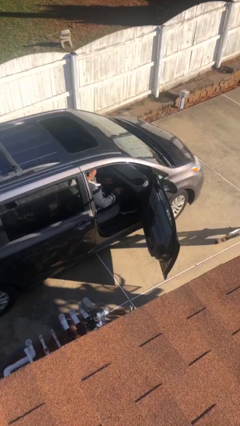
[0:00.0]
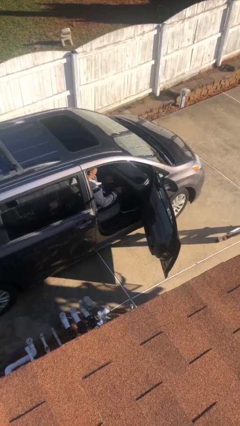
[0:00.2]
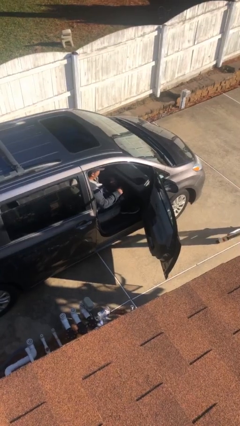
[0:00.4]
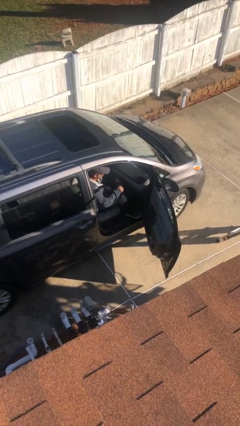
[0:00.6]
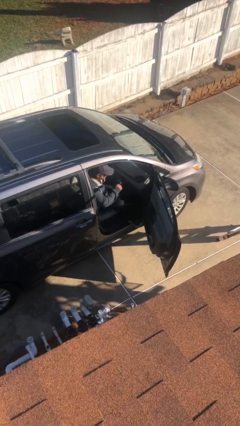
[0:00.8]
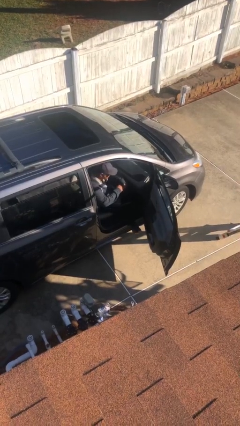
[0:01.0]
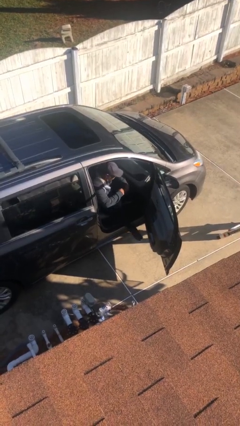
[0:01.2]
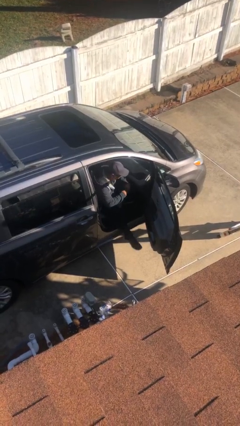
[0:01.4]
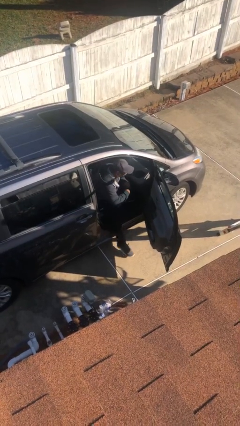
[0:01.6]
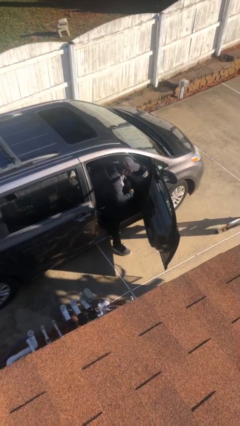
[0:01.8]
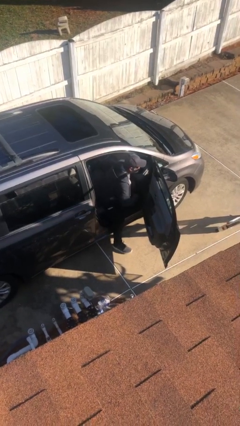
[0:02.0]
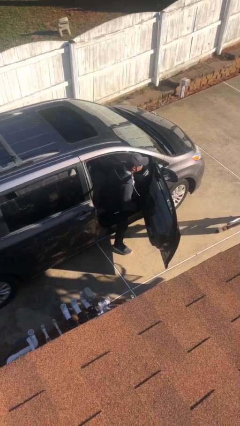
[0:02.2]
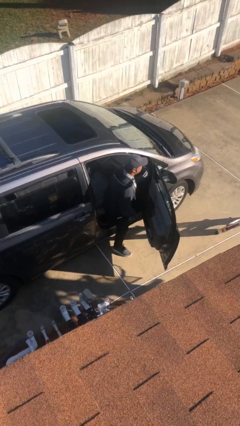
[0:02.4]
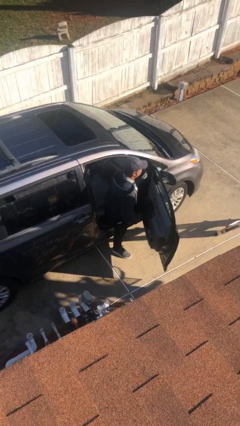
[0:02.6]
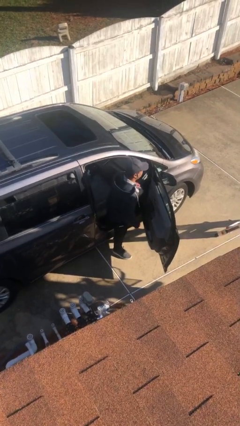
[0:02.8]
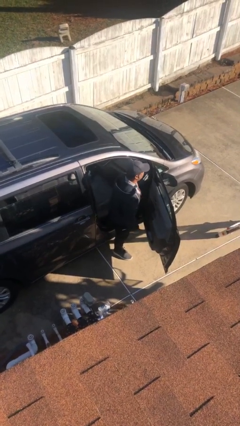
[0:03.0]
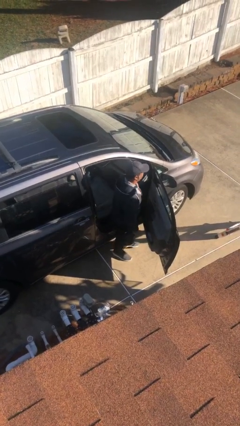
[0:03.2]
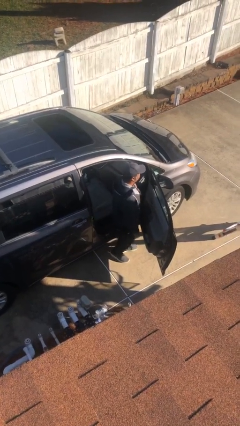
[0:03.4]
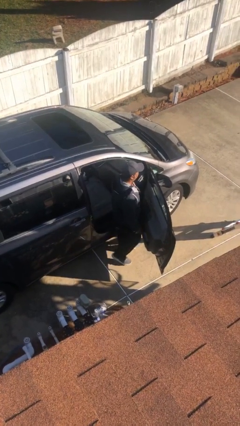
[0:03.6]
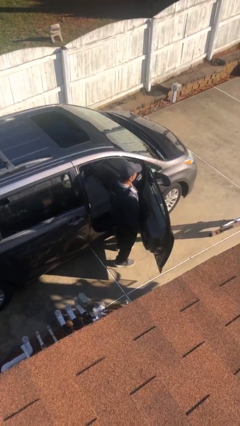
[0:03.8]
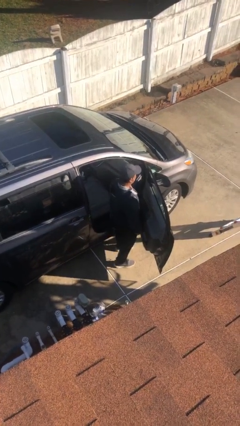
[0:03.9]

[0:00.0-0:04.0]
person exits car

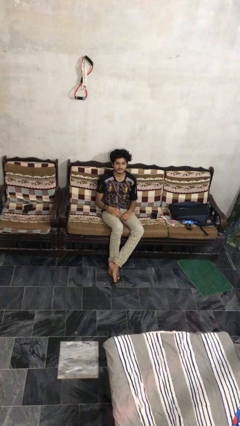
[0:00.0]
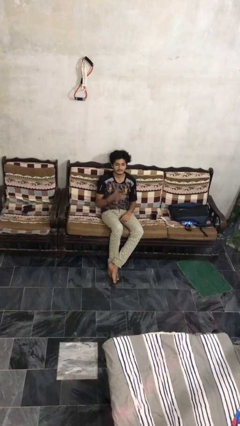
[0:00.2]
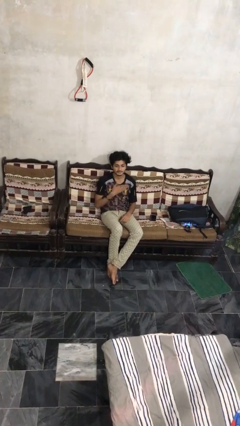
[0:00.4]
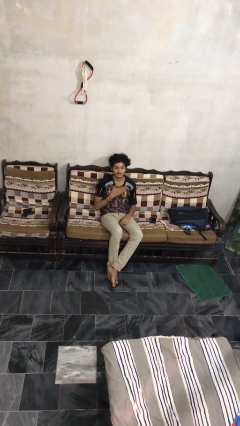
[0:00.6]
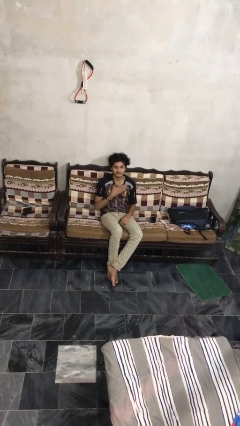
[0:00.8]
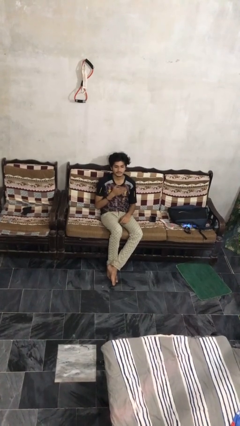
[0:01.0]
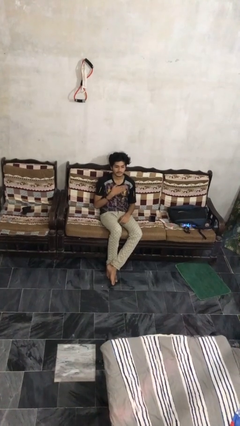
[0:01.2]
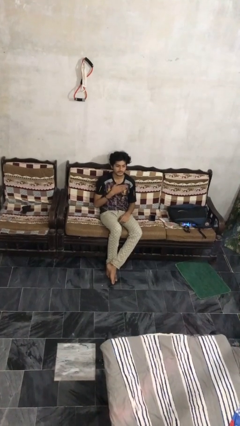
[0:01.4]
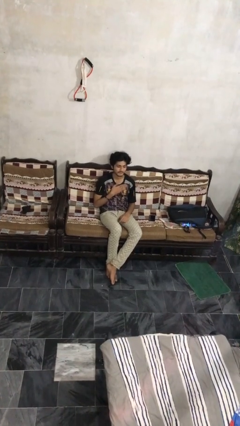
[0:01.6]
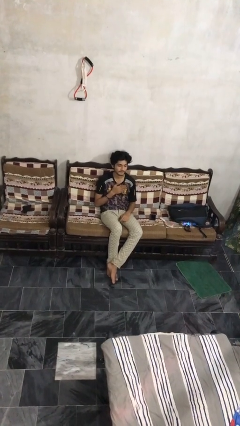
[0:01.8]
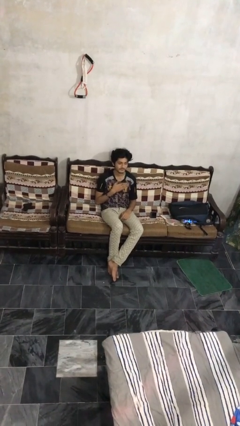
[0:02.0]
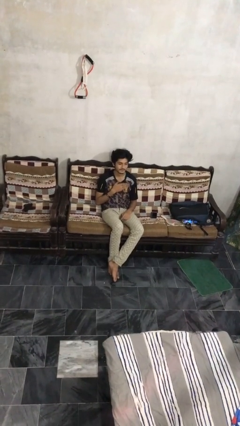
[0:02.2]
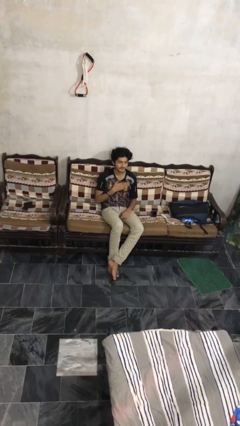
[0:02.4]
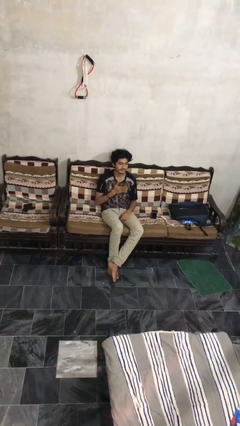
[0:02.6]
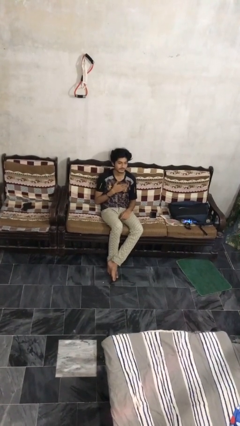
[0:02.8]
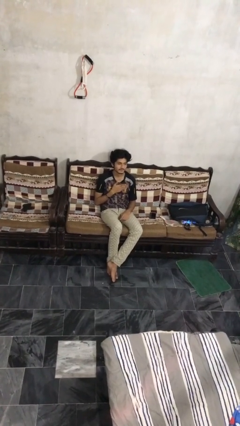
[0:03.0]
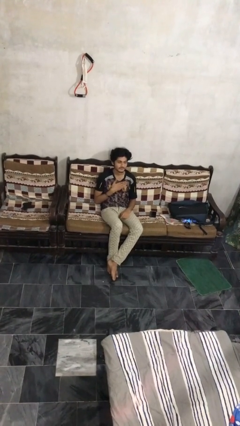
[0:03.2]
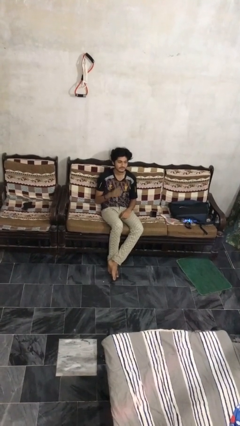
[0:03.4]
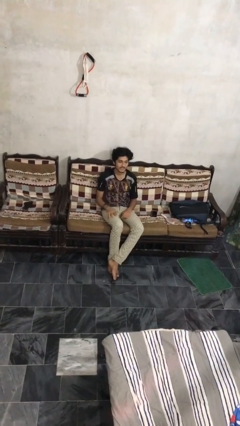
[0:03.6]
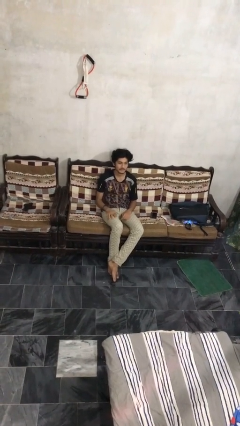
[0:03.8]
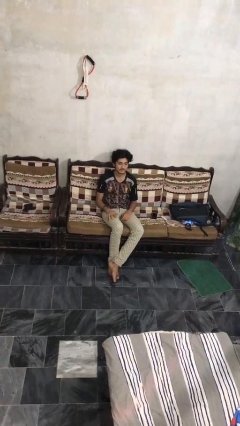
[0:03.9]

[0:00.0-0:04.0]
person drums on chest

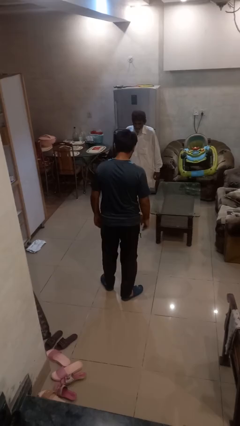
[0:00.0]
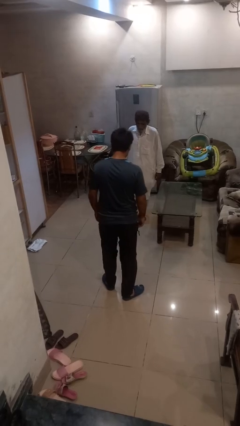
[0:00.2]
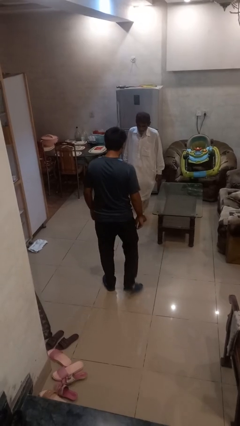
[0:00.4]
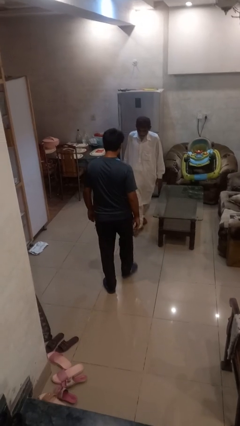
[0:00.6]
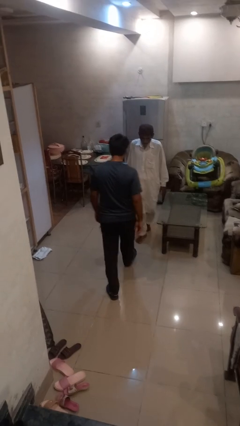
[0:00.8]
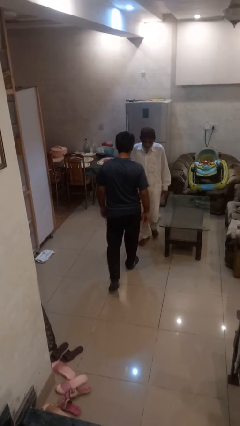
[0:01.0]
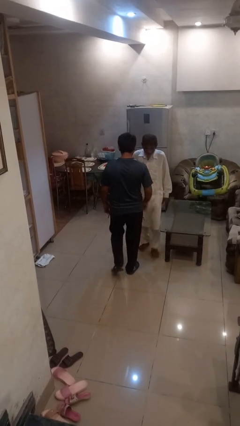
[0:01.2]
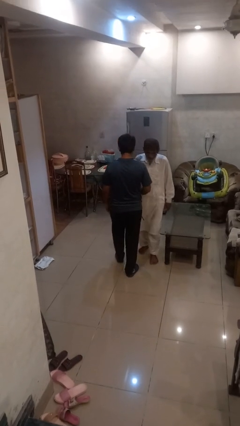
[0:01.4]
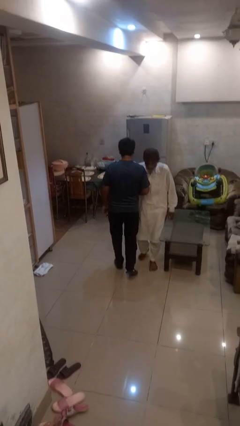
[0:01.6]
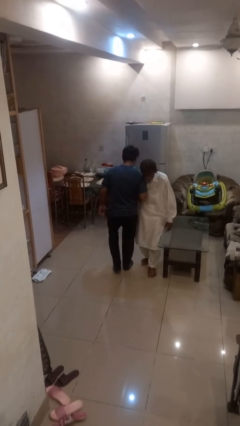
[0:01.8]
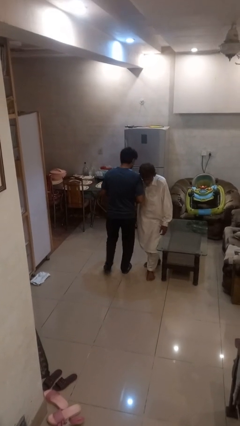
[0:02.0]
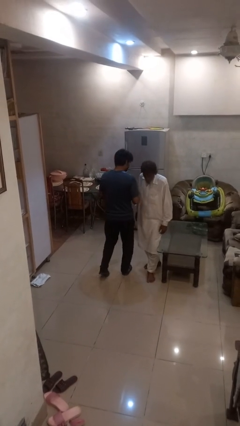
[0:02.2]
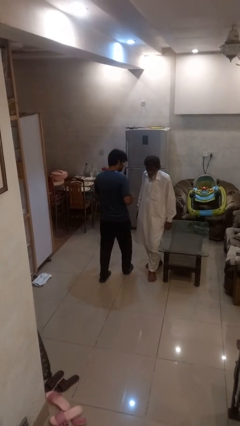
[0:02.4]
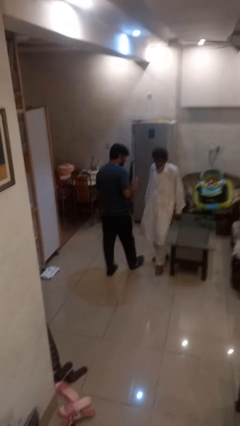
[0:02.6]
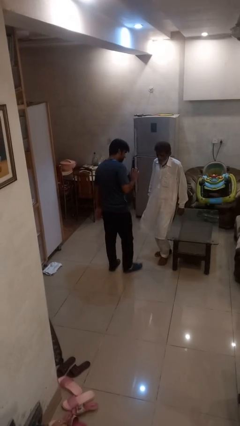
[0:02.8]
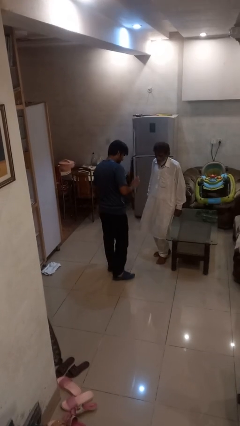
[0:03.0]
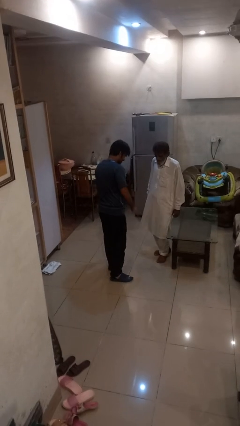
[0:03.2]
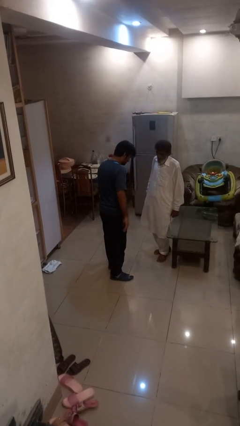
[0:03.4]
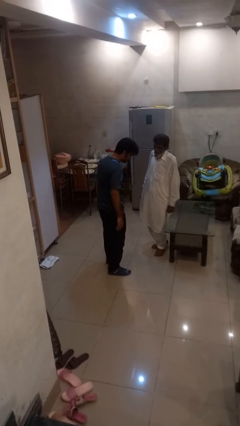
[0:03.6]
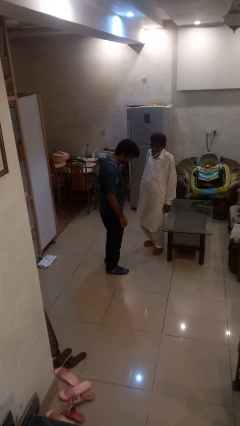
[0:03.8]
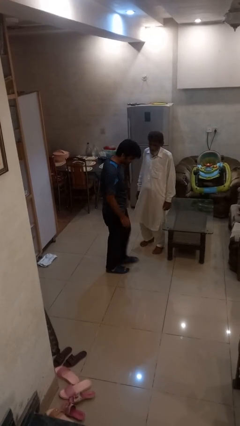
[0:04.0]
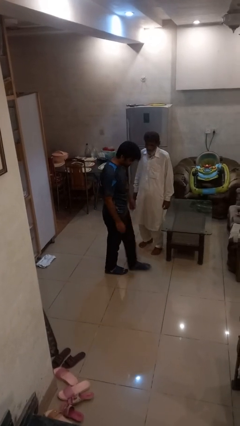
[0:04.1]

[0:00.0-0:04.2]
person bumps into person

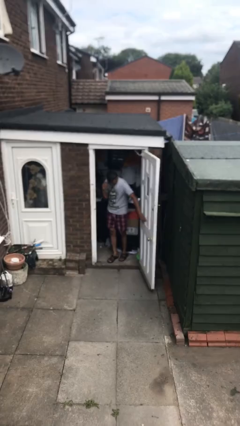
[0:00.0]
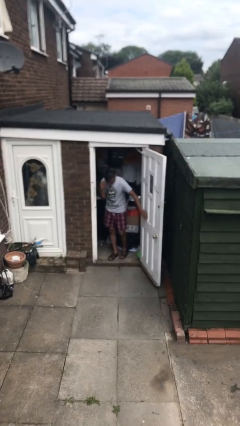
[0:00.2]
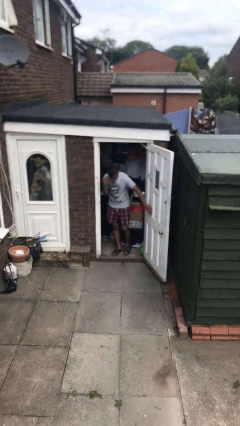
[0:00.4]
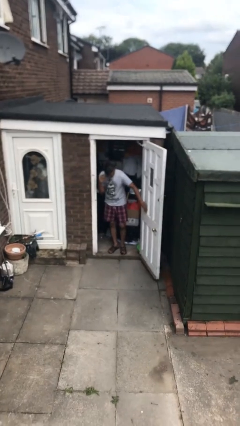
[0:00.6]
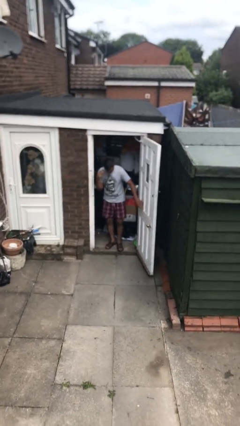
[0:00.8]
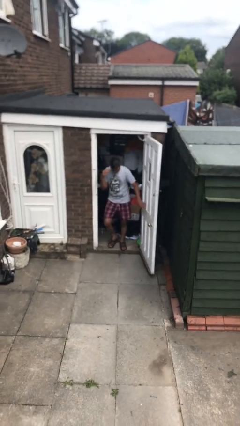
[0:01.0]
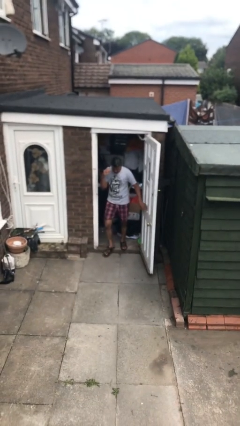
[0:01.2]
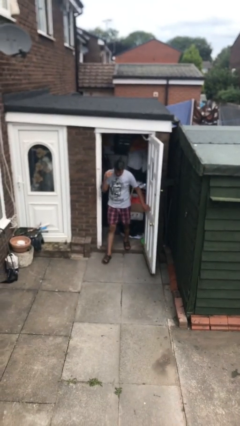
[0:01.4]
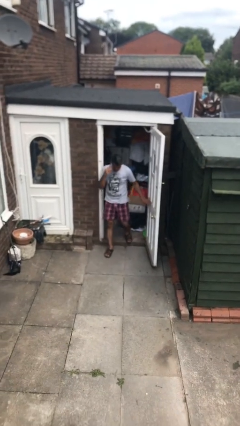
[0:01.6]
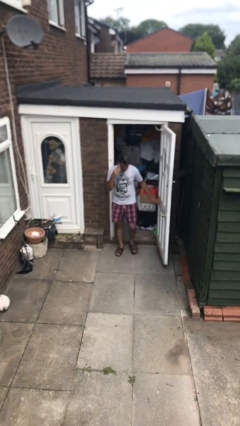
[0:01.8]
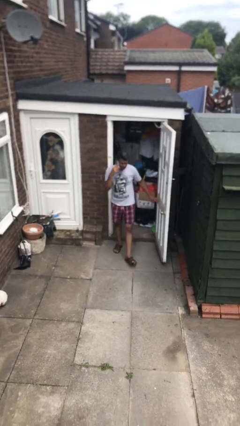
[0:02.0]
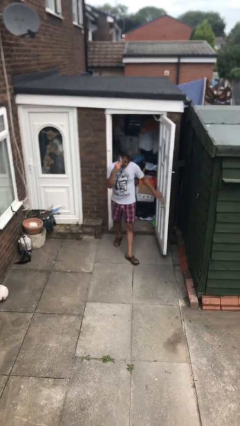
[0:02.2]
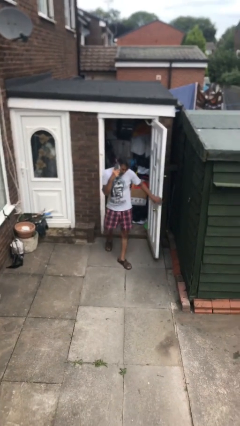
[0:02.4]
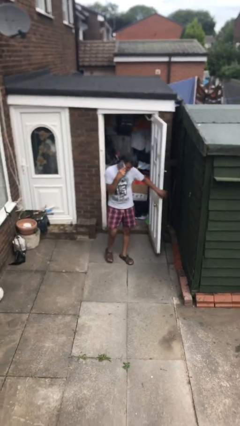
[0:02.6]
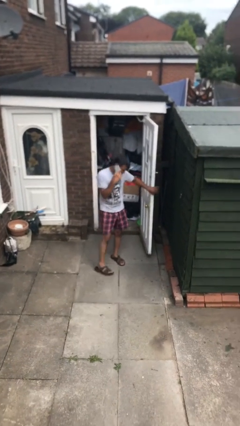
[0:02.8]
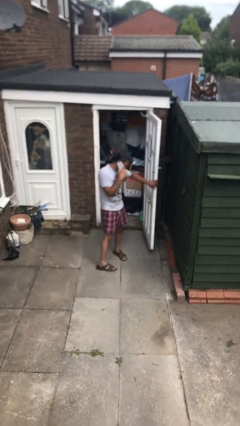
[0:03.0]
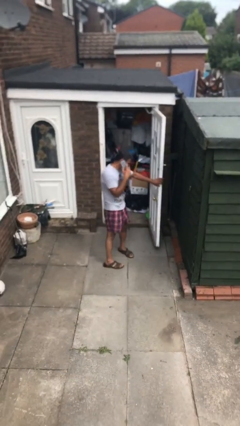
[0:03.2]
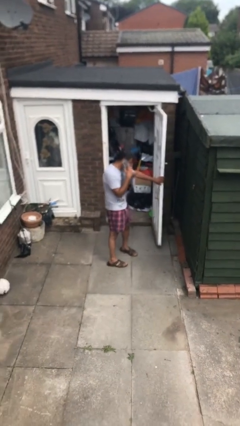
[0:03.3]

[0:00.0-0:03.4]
person enters scene through structure

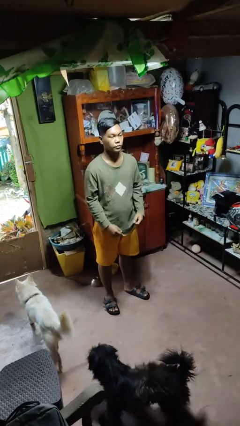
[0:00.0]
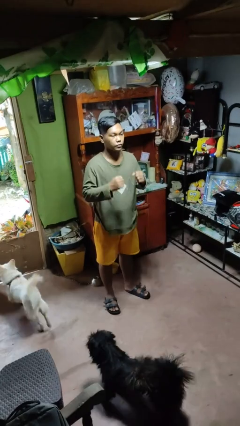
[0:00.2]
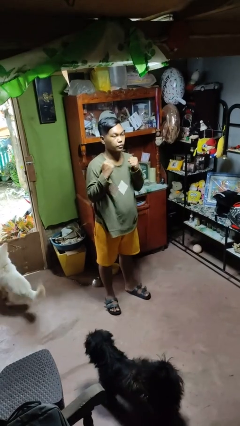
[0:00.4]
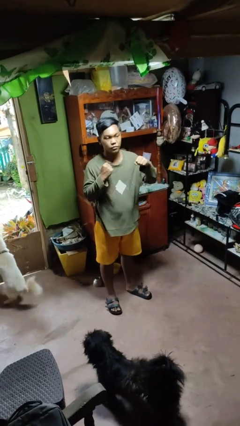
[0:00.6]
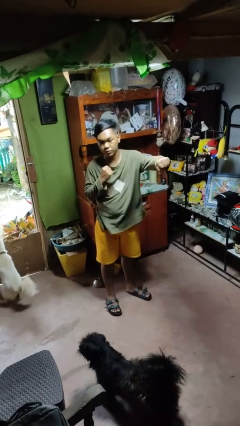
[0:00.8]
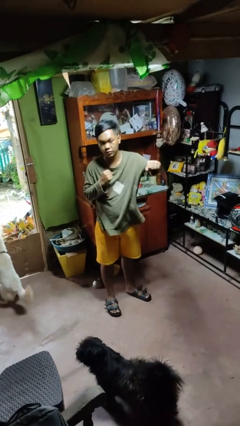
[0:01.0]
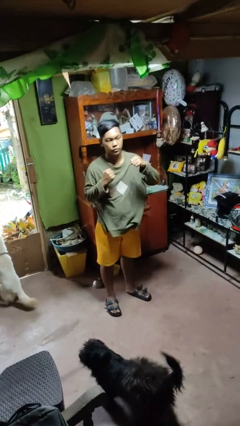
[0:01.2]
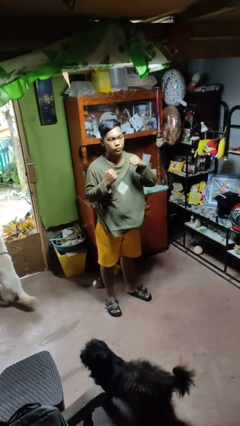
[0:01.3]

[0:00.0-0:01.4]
person punches

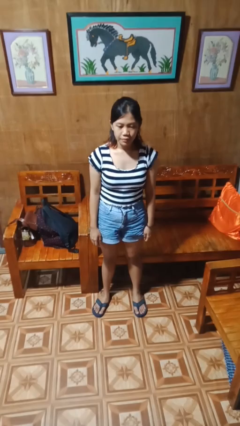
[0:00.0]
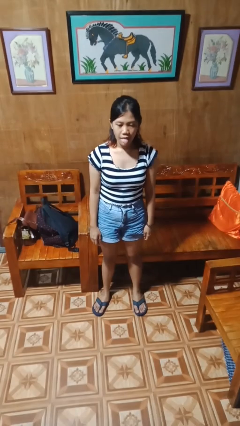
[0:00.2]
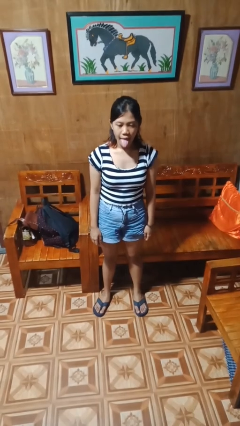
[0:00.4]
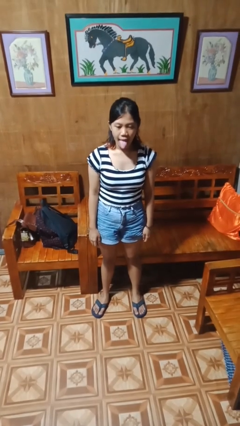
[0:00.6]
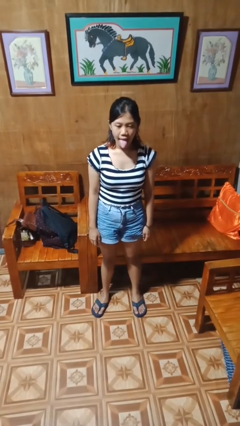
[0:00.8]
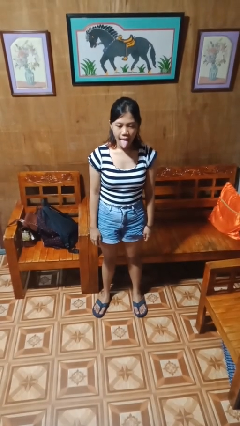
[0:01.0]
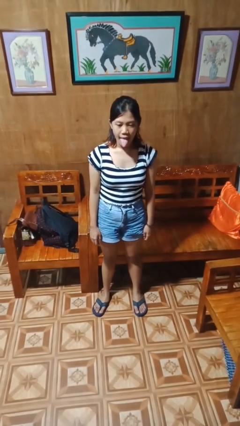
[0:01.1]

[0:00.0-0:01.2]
person sticks out tongue
